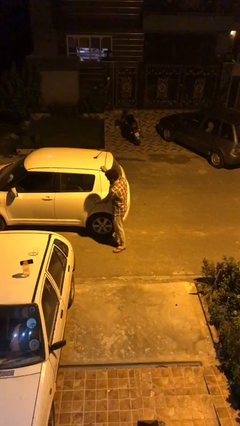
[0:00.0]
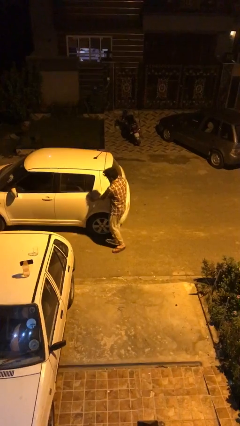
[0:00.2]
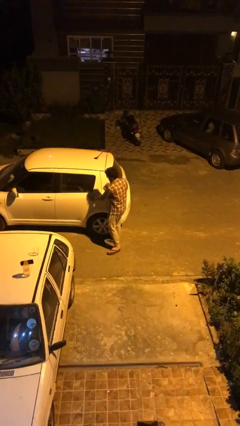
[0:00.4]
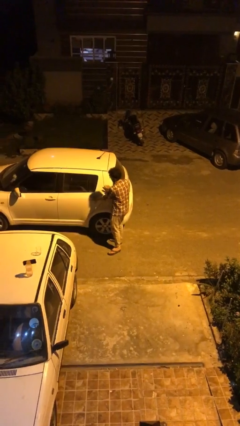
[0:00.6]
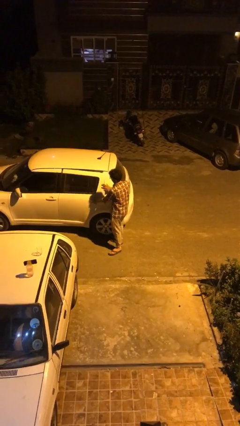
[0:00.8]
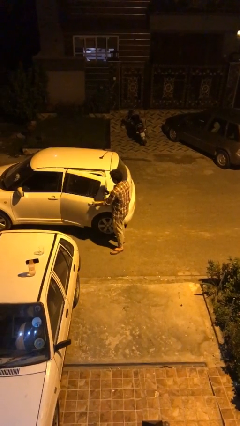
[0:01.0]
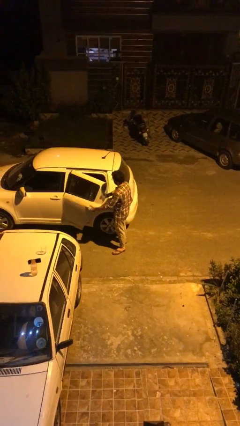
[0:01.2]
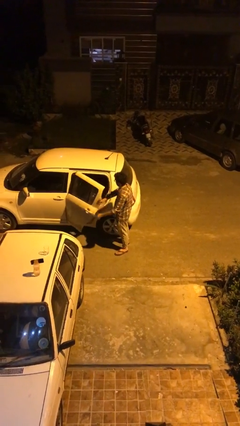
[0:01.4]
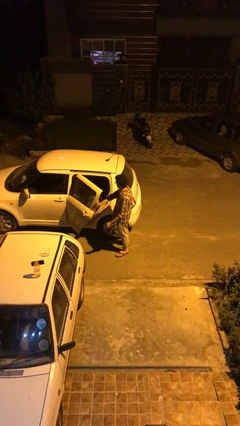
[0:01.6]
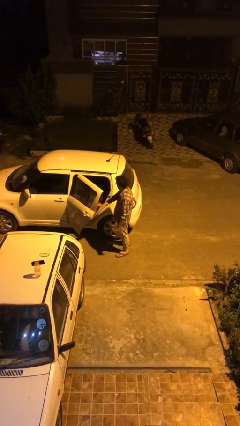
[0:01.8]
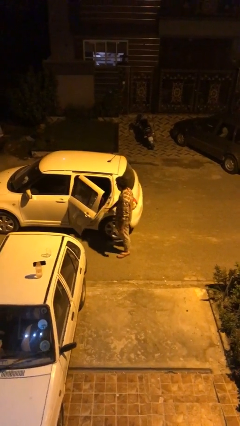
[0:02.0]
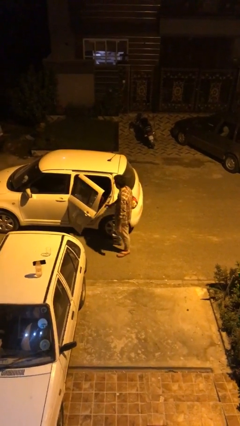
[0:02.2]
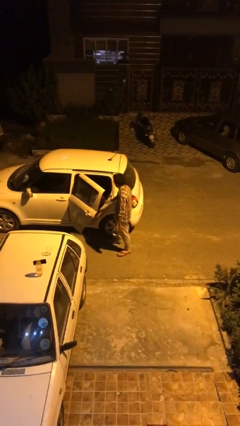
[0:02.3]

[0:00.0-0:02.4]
person opens car door

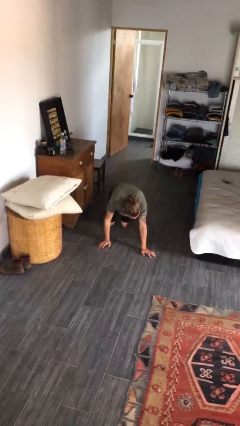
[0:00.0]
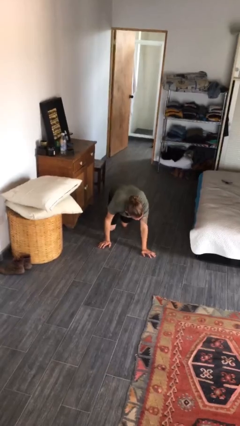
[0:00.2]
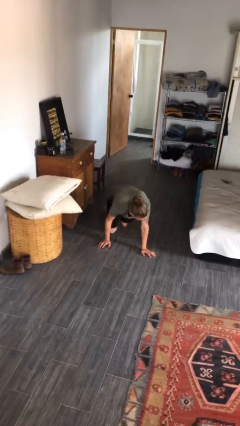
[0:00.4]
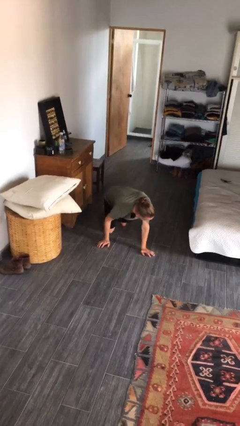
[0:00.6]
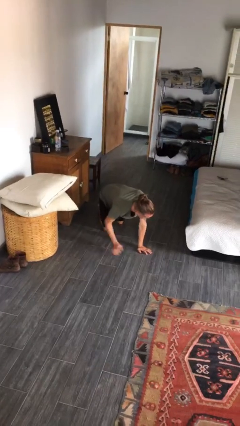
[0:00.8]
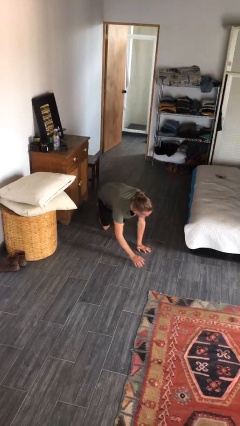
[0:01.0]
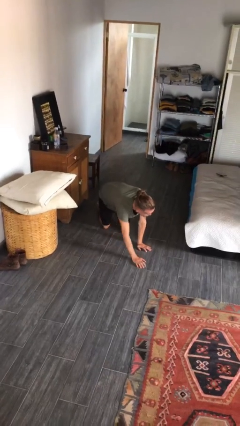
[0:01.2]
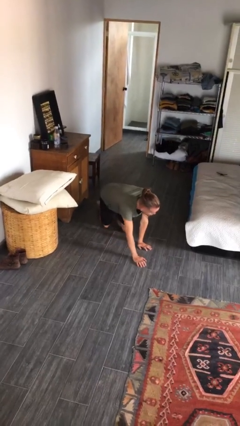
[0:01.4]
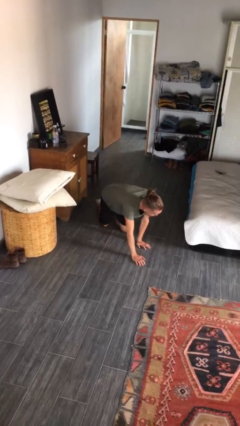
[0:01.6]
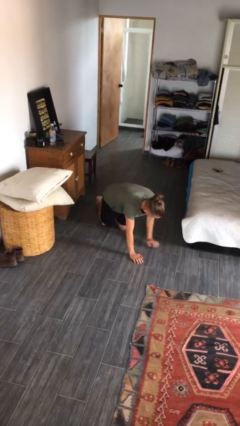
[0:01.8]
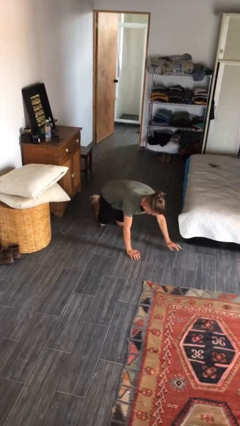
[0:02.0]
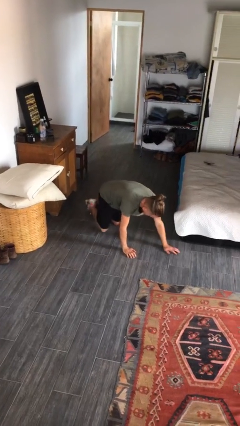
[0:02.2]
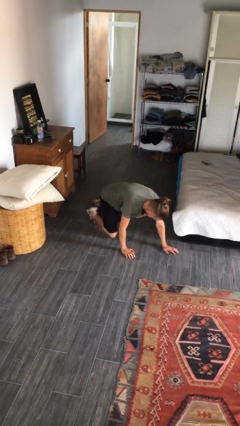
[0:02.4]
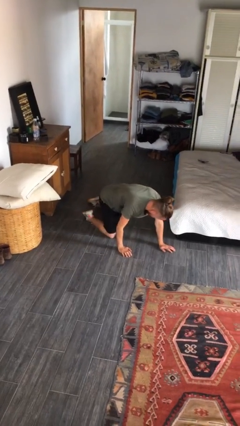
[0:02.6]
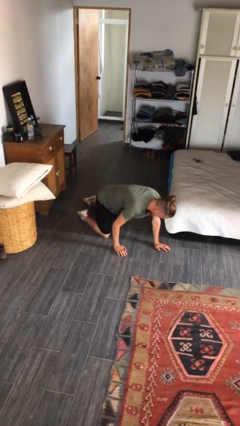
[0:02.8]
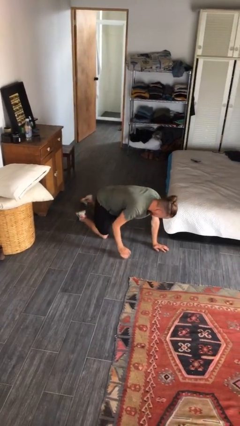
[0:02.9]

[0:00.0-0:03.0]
person crawls

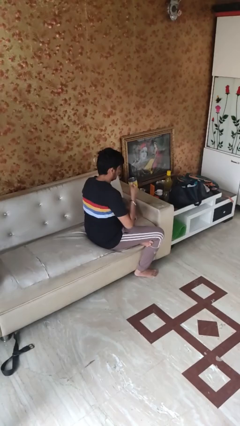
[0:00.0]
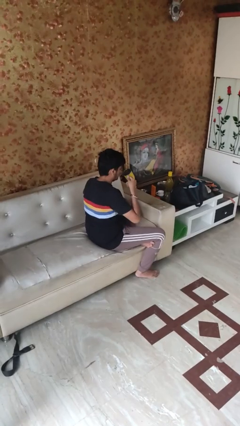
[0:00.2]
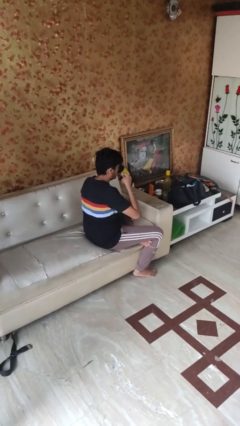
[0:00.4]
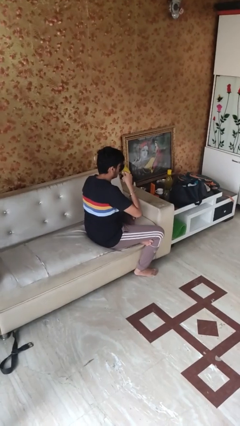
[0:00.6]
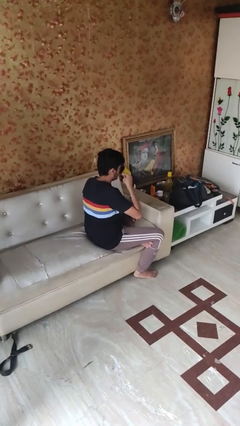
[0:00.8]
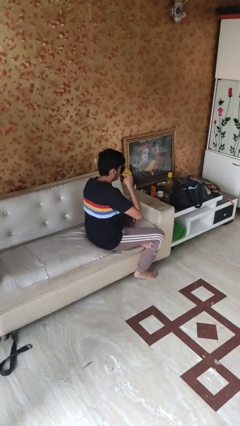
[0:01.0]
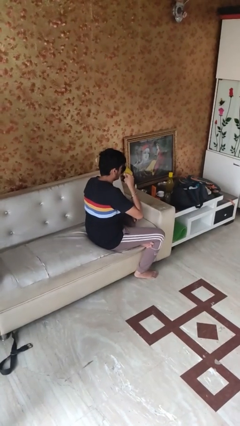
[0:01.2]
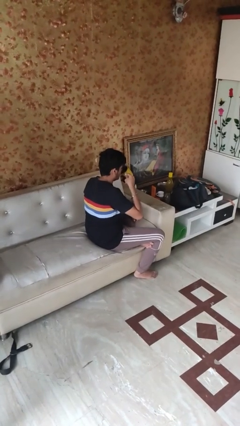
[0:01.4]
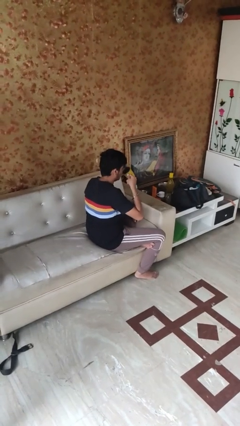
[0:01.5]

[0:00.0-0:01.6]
person drinks from mug

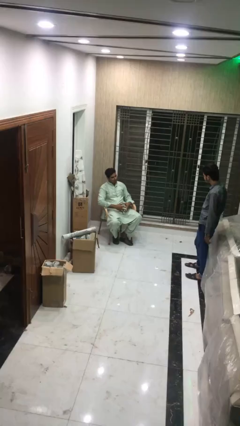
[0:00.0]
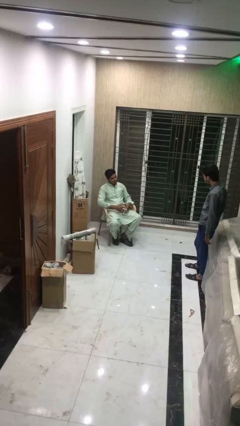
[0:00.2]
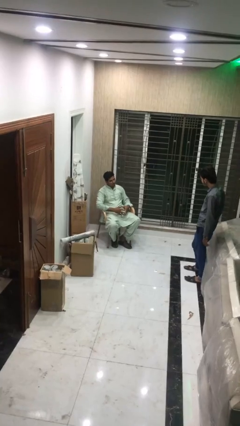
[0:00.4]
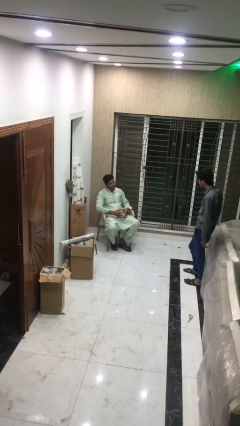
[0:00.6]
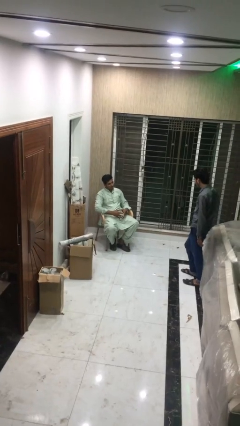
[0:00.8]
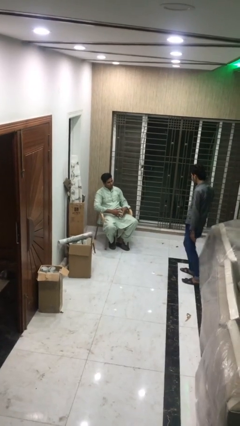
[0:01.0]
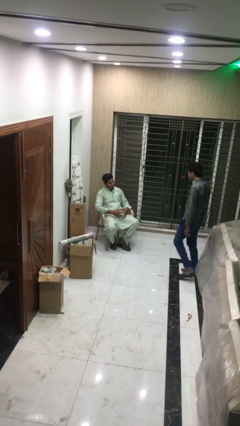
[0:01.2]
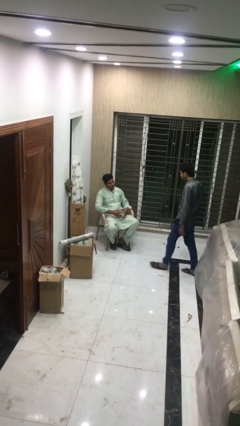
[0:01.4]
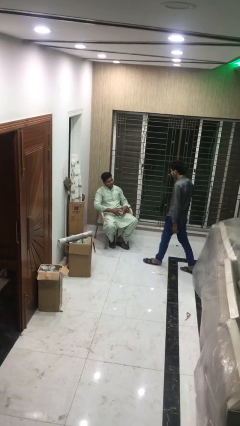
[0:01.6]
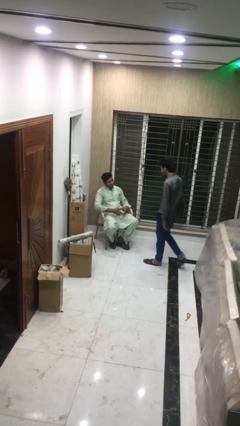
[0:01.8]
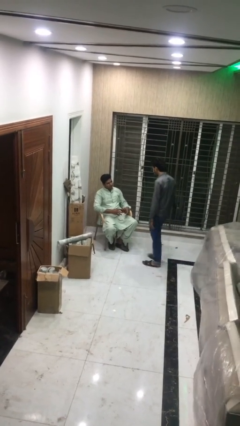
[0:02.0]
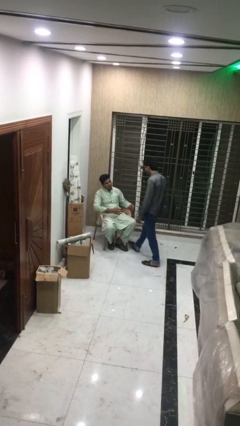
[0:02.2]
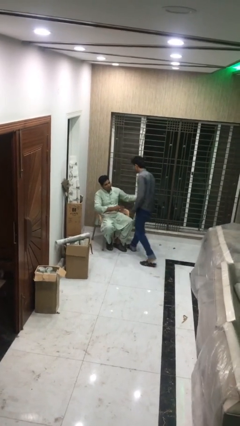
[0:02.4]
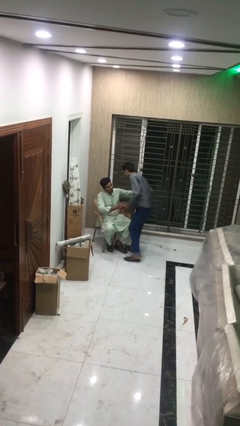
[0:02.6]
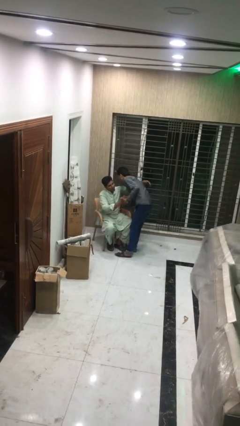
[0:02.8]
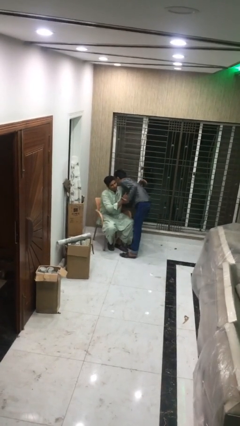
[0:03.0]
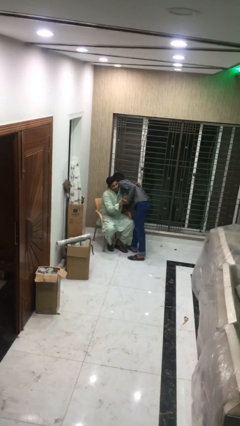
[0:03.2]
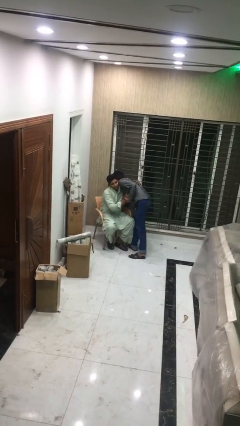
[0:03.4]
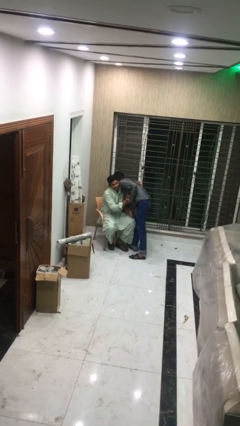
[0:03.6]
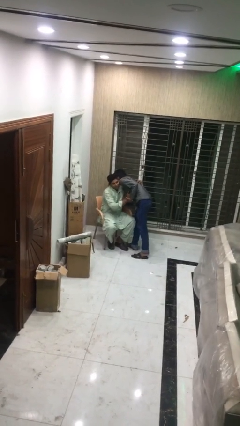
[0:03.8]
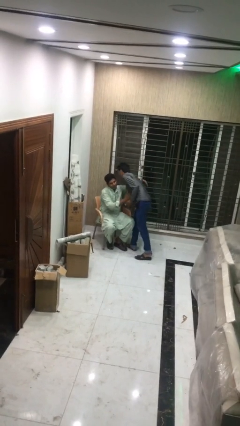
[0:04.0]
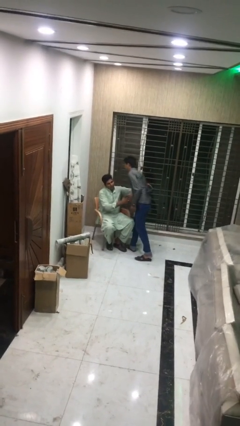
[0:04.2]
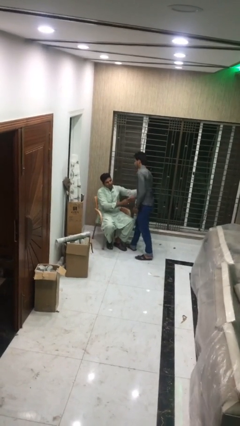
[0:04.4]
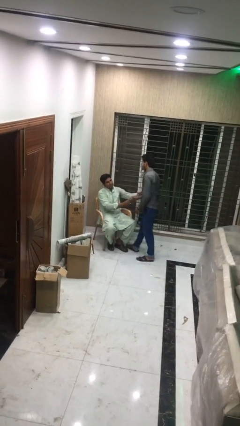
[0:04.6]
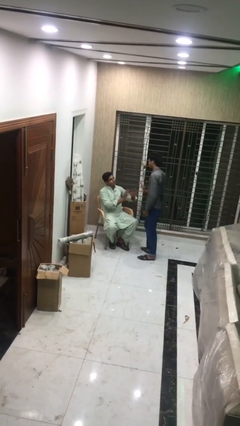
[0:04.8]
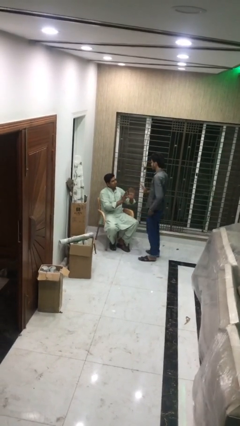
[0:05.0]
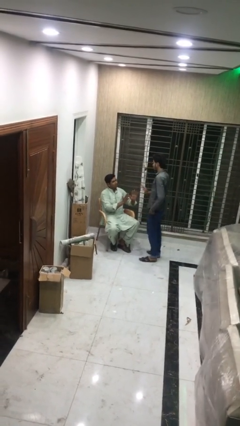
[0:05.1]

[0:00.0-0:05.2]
person embraces person

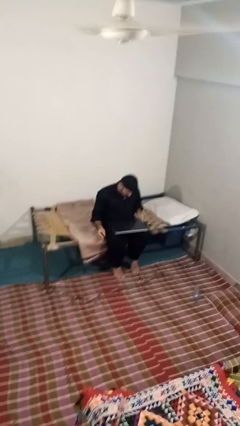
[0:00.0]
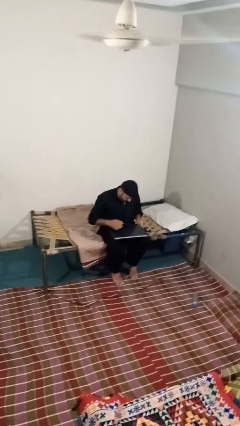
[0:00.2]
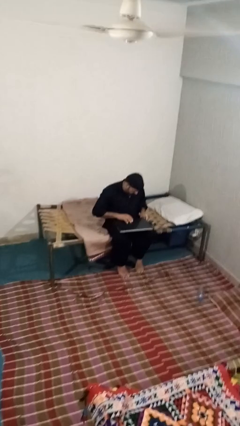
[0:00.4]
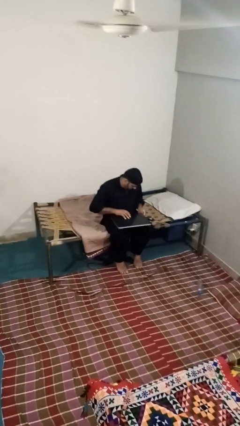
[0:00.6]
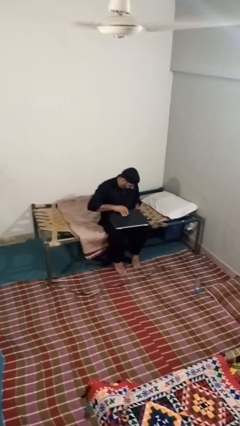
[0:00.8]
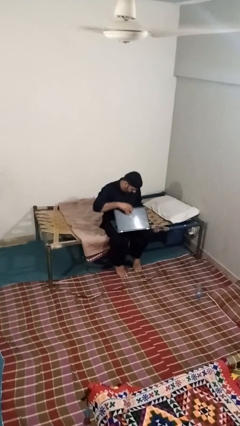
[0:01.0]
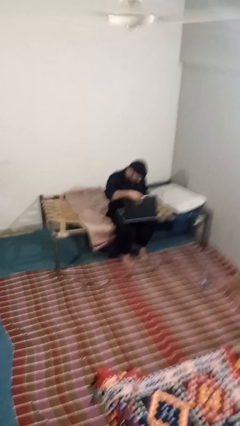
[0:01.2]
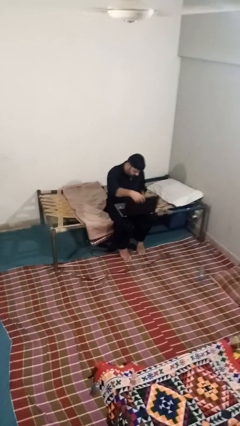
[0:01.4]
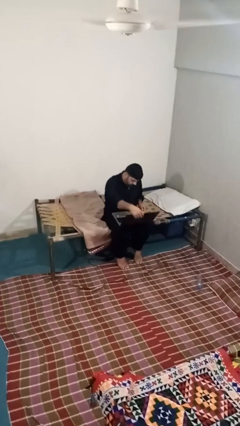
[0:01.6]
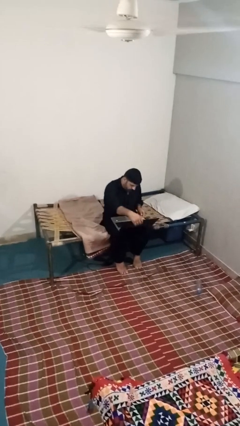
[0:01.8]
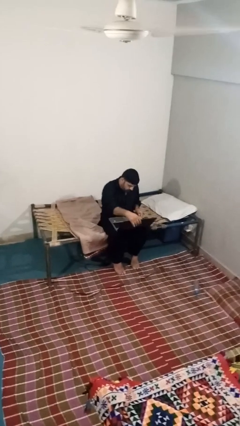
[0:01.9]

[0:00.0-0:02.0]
person opens laptop

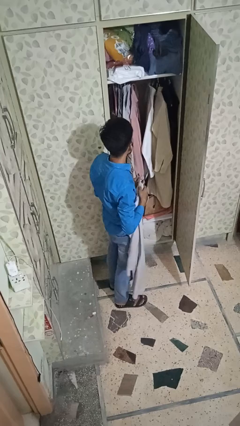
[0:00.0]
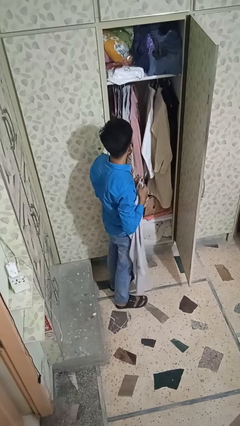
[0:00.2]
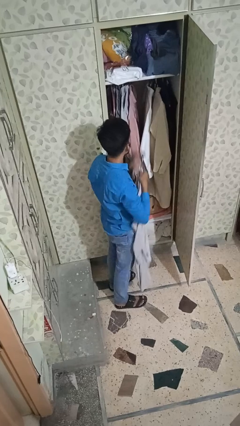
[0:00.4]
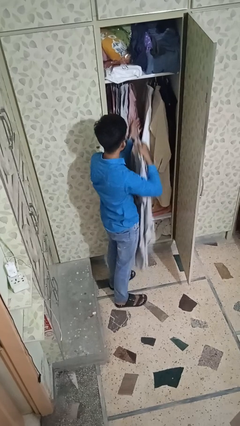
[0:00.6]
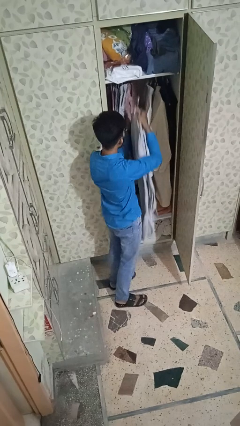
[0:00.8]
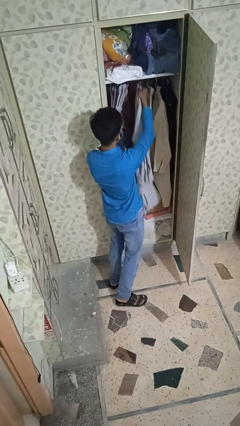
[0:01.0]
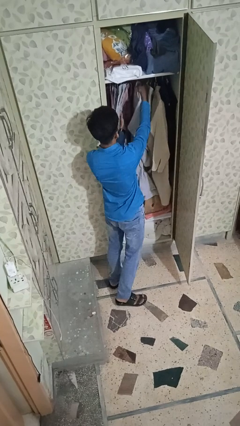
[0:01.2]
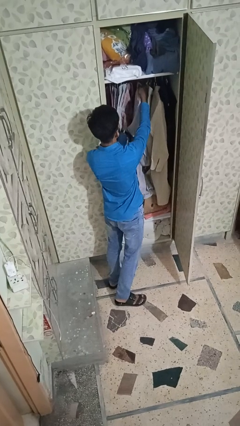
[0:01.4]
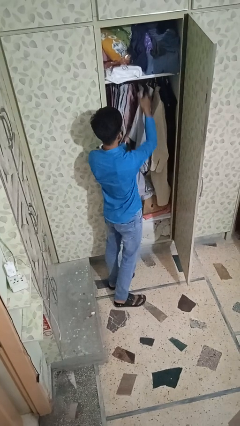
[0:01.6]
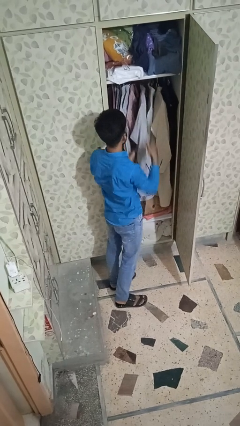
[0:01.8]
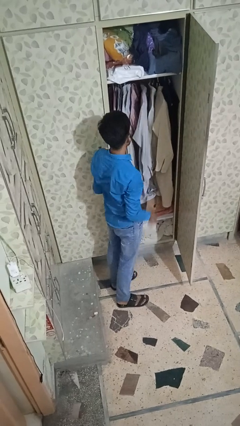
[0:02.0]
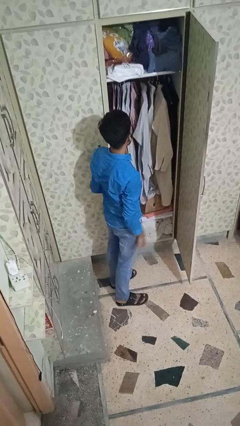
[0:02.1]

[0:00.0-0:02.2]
person puts clothes into closet

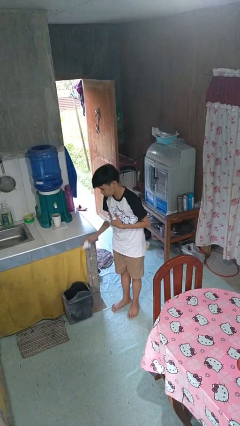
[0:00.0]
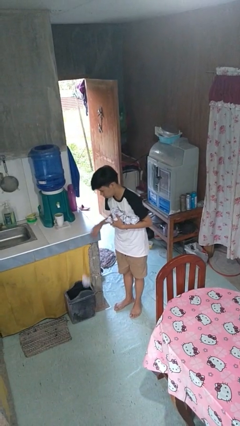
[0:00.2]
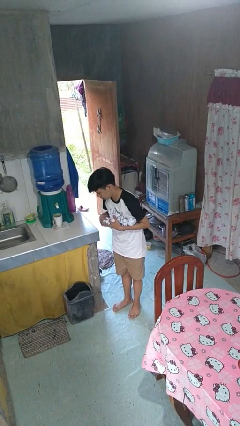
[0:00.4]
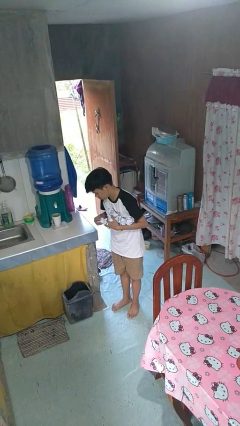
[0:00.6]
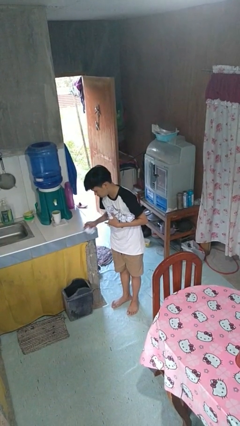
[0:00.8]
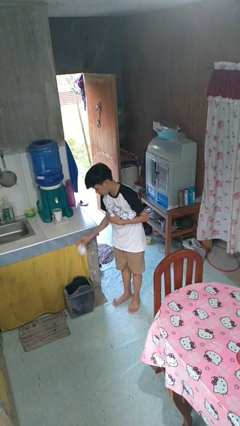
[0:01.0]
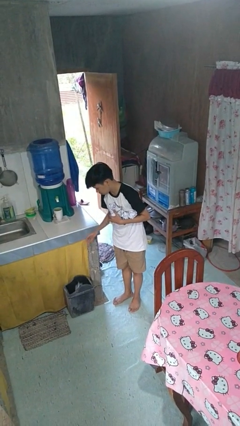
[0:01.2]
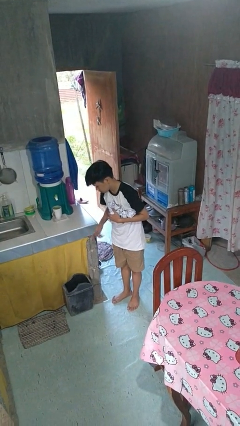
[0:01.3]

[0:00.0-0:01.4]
person discards trash
